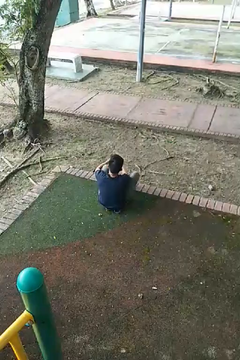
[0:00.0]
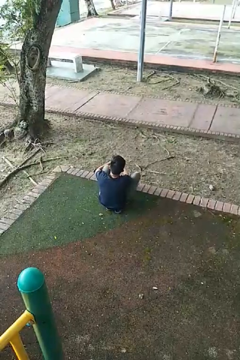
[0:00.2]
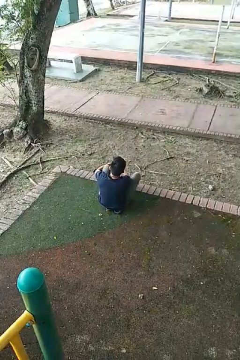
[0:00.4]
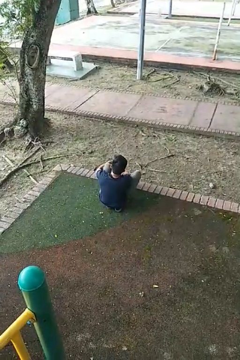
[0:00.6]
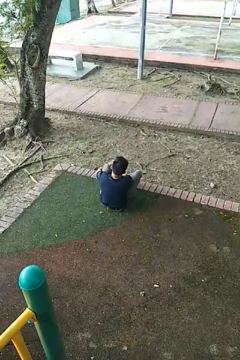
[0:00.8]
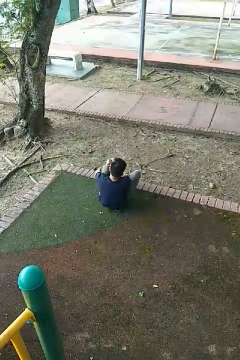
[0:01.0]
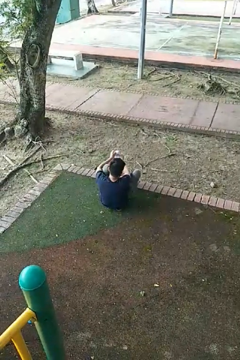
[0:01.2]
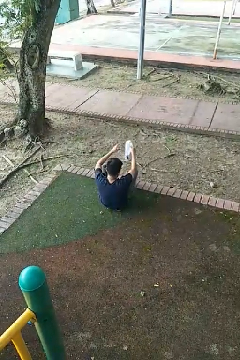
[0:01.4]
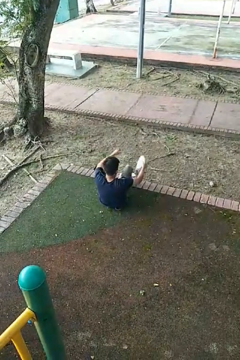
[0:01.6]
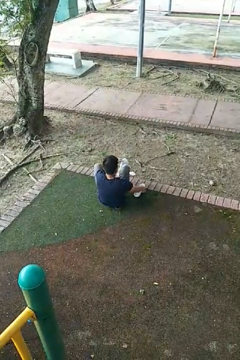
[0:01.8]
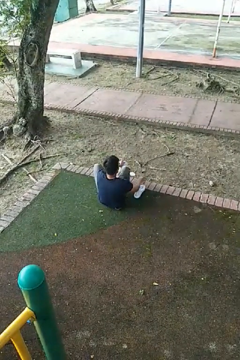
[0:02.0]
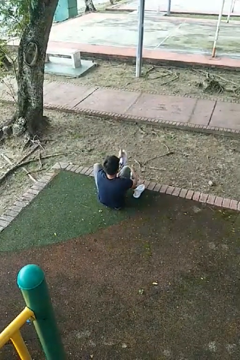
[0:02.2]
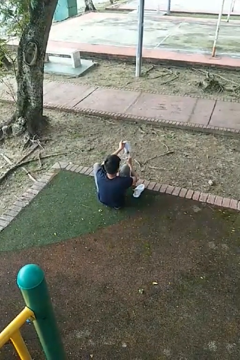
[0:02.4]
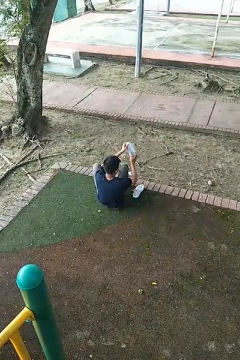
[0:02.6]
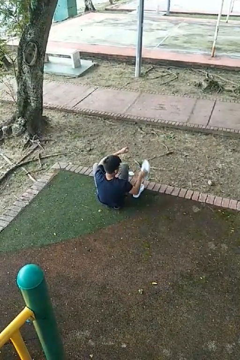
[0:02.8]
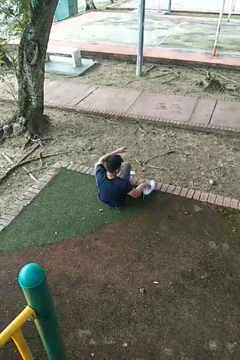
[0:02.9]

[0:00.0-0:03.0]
person takes off shoes

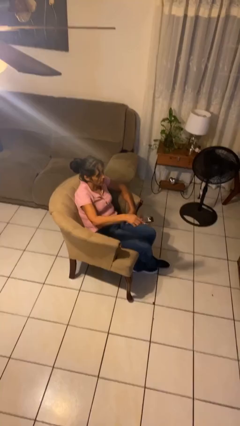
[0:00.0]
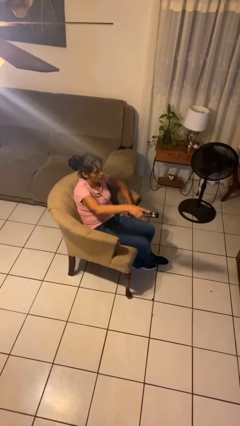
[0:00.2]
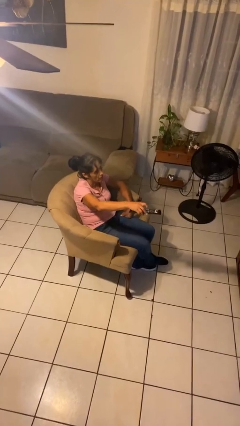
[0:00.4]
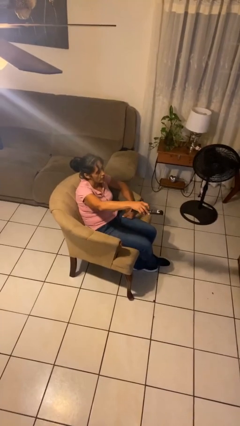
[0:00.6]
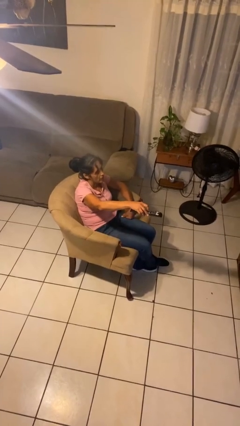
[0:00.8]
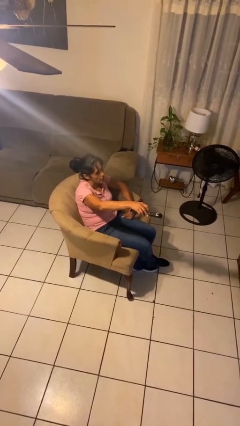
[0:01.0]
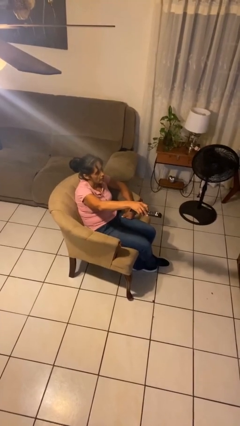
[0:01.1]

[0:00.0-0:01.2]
person uses television remote

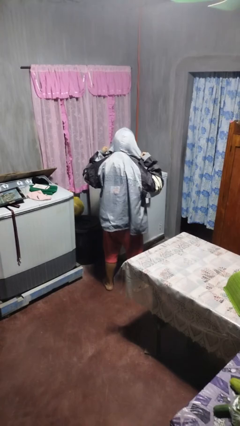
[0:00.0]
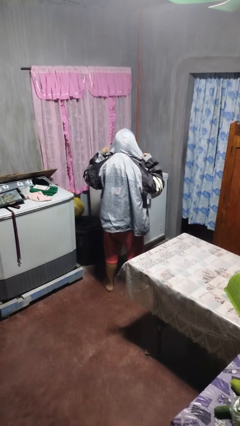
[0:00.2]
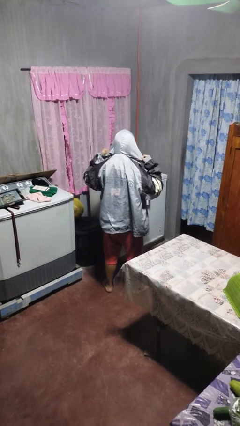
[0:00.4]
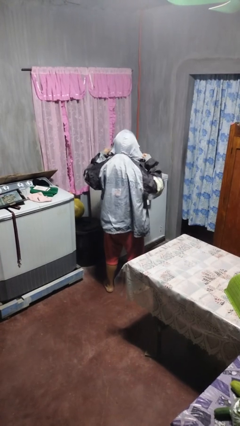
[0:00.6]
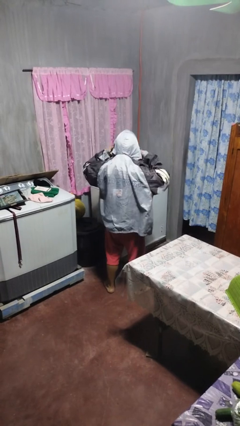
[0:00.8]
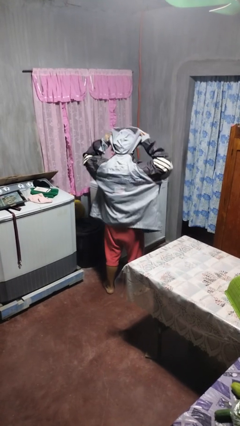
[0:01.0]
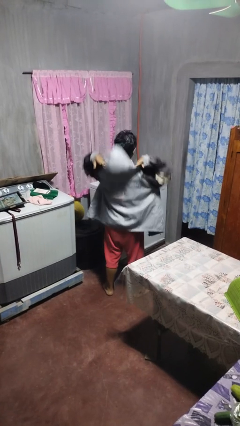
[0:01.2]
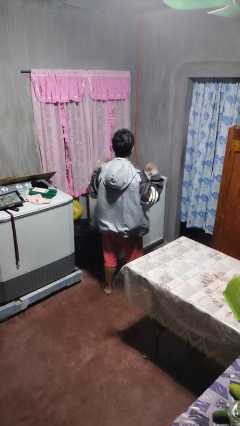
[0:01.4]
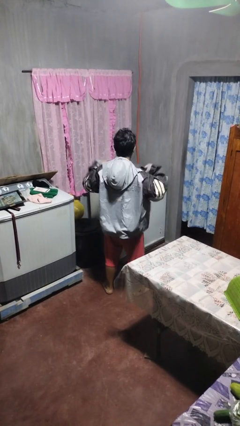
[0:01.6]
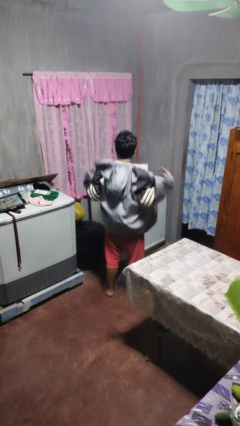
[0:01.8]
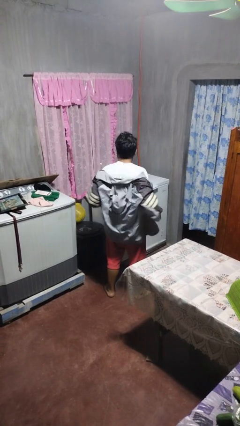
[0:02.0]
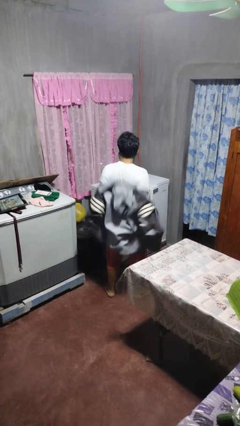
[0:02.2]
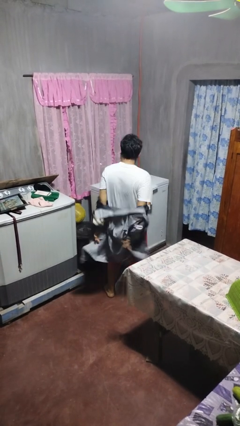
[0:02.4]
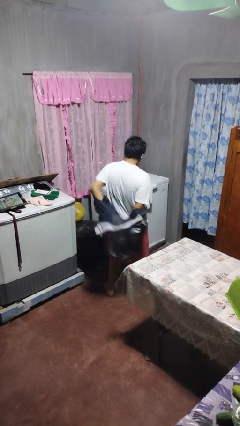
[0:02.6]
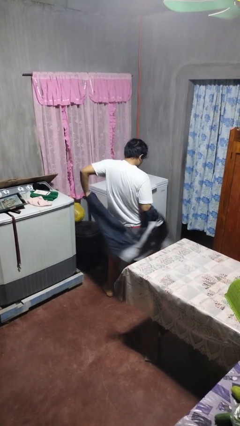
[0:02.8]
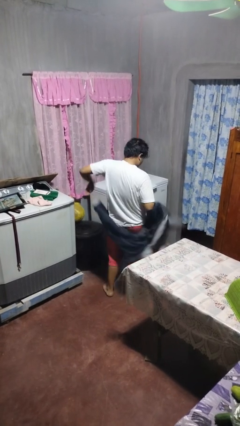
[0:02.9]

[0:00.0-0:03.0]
person takes off hoodie

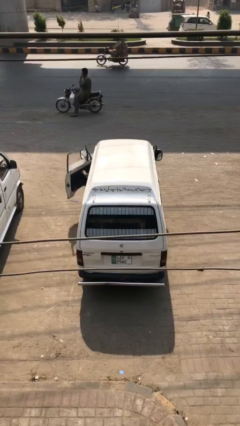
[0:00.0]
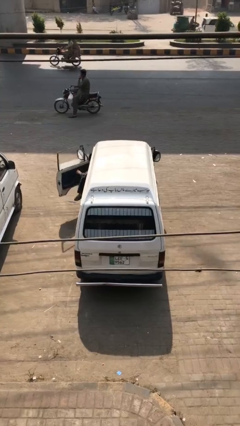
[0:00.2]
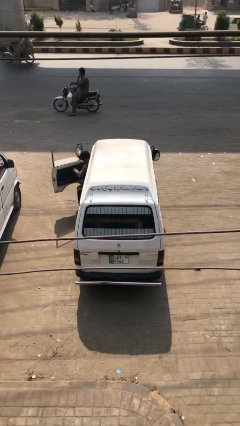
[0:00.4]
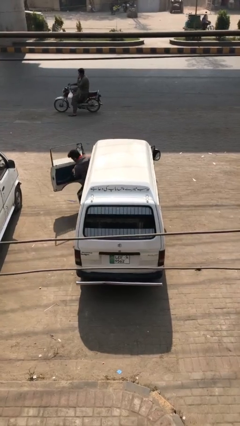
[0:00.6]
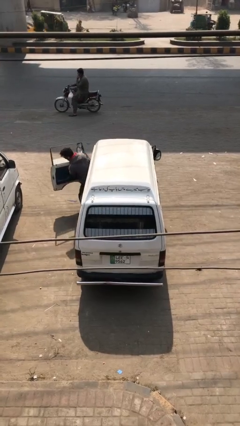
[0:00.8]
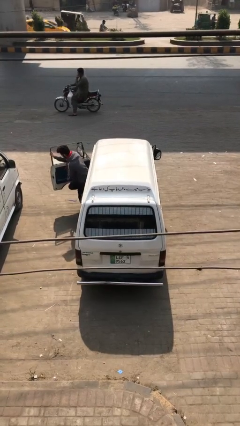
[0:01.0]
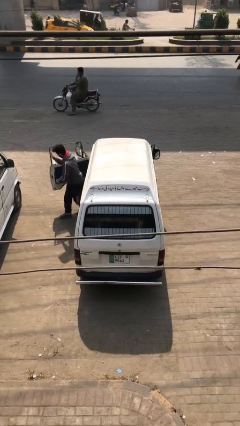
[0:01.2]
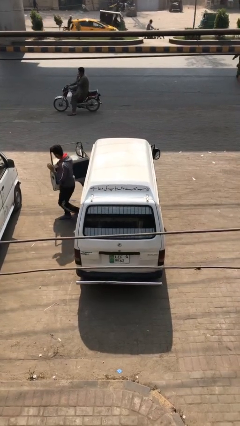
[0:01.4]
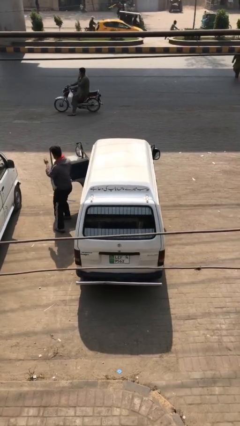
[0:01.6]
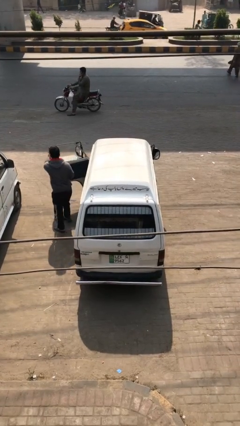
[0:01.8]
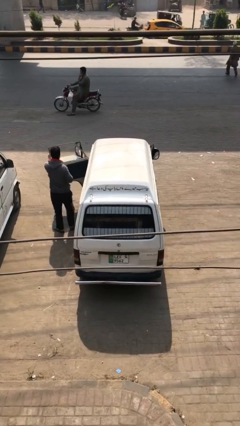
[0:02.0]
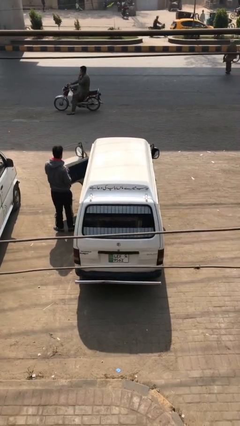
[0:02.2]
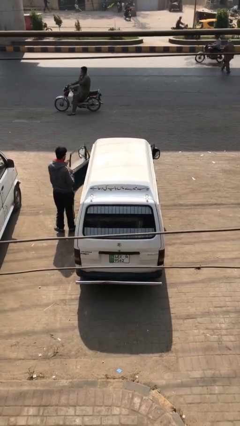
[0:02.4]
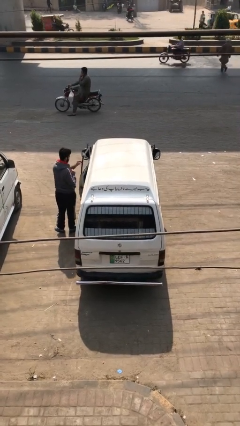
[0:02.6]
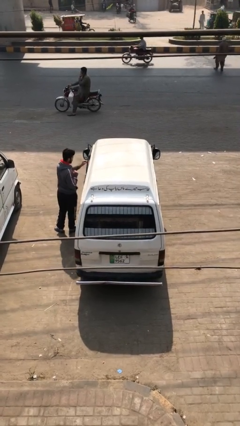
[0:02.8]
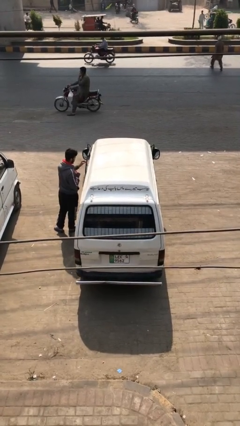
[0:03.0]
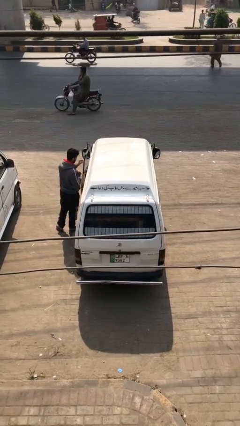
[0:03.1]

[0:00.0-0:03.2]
car drops off person

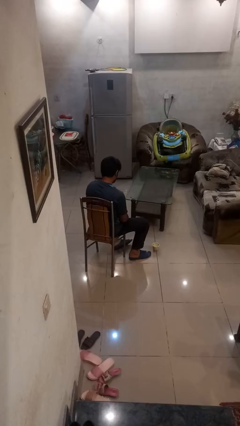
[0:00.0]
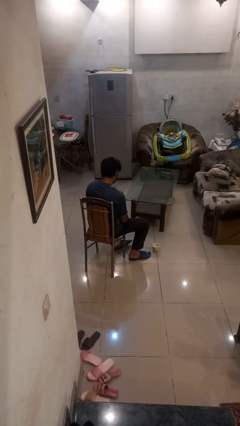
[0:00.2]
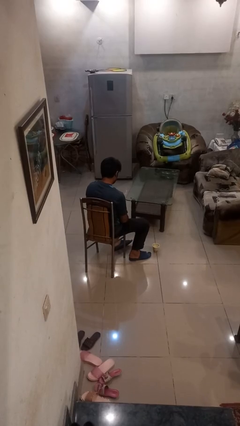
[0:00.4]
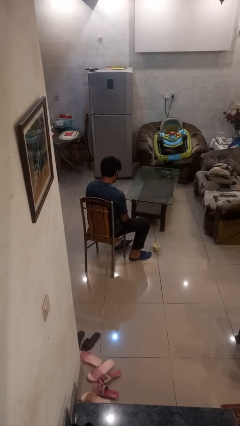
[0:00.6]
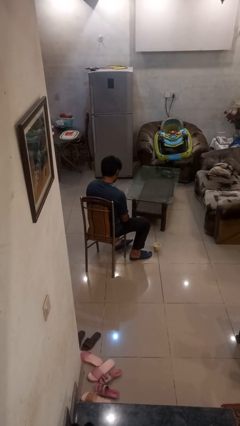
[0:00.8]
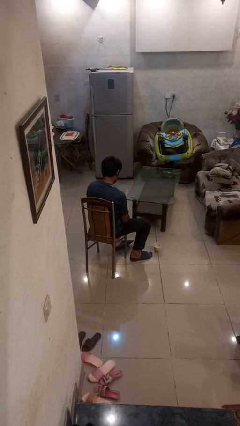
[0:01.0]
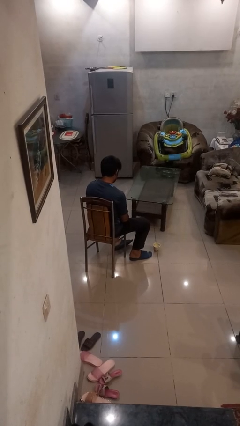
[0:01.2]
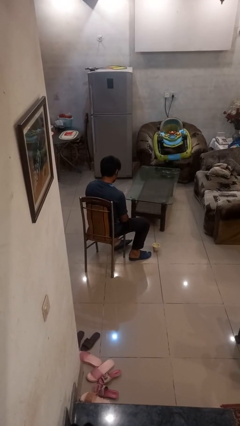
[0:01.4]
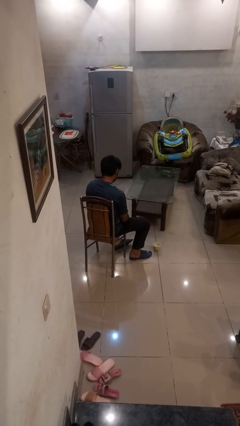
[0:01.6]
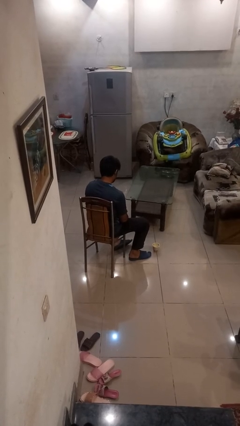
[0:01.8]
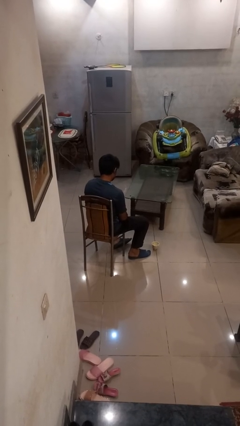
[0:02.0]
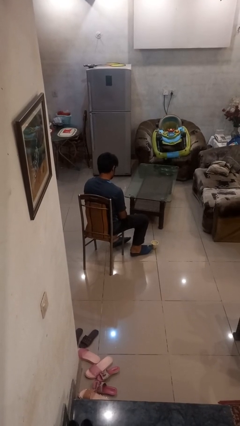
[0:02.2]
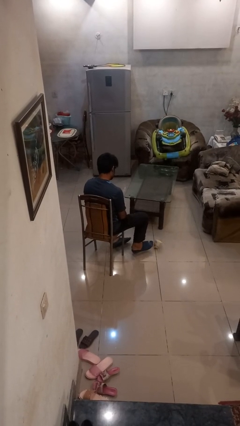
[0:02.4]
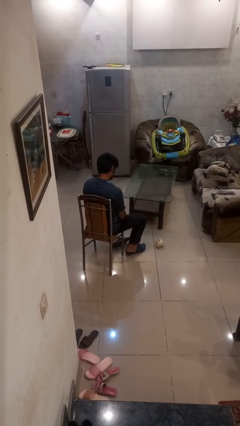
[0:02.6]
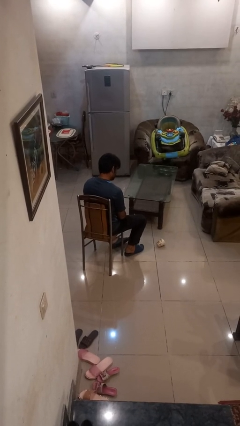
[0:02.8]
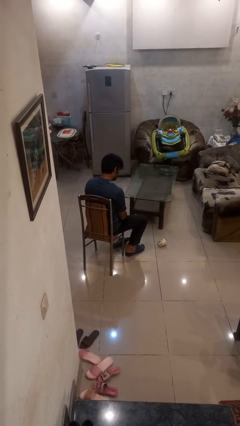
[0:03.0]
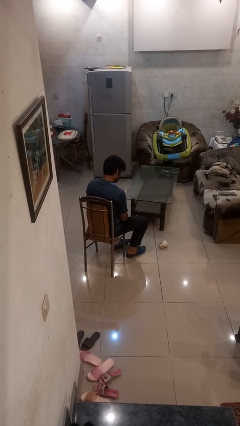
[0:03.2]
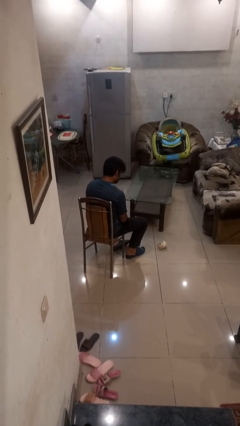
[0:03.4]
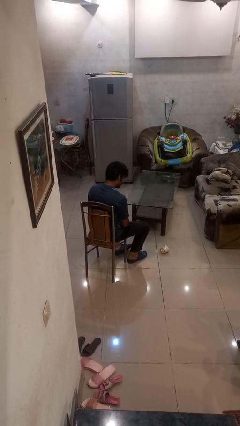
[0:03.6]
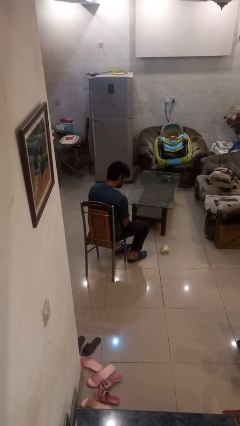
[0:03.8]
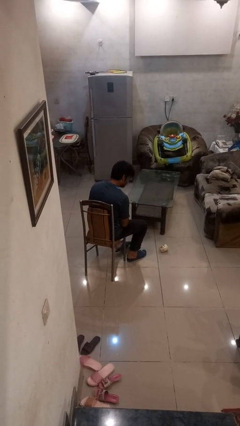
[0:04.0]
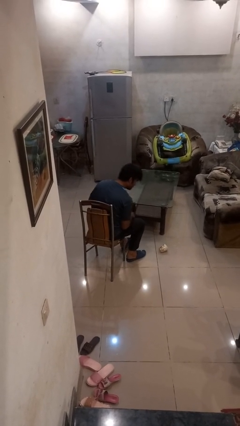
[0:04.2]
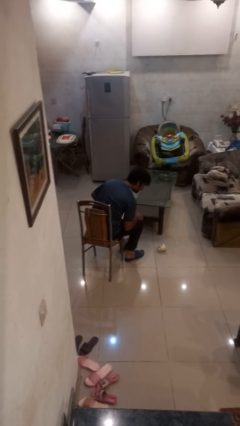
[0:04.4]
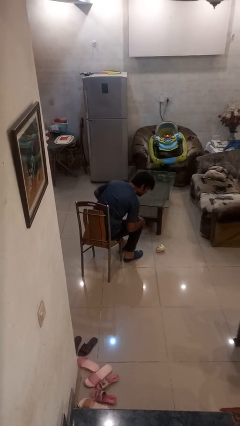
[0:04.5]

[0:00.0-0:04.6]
person spills on floor

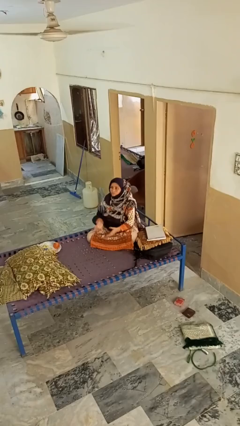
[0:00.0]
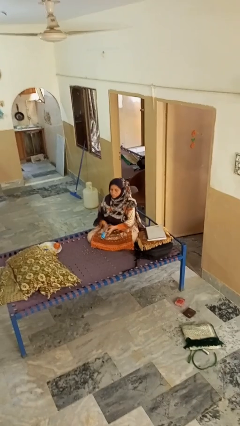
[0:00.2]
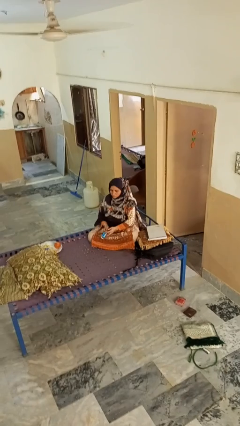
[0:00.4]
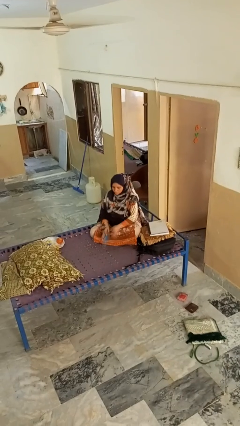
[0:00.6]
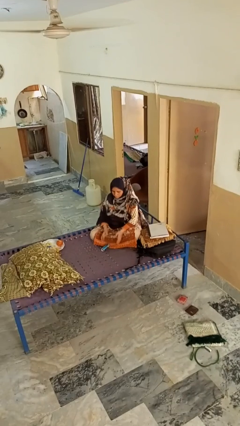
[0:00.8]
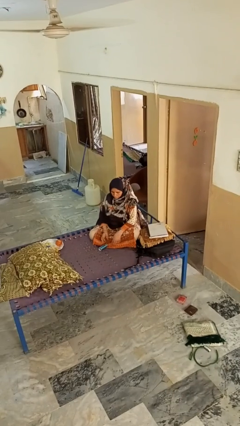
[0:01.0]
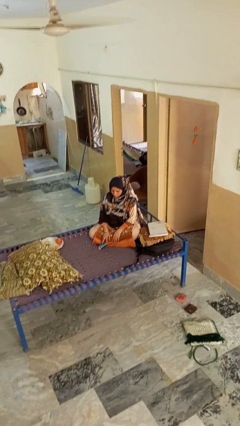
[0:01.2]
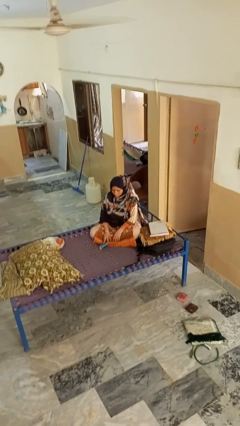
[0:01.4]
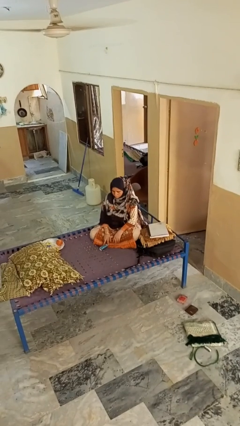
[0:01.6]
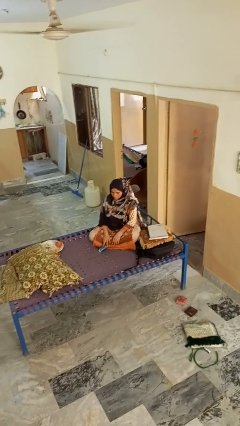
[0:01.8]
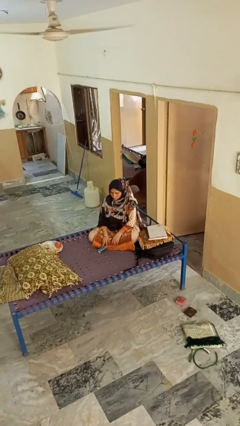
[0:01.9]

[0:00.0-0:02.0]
person catches dropped object

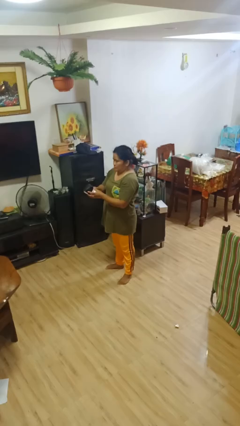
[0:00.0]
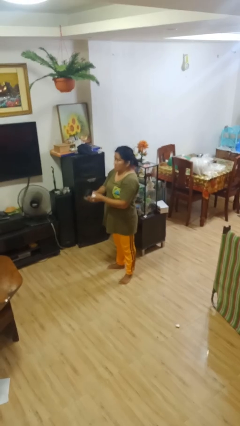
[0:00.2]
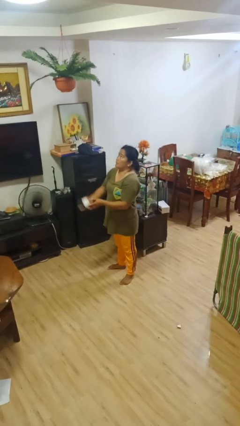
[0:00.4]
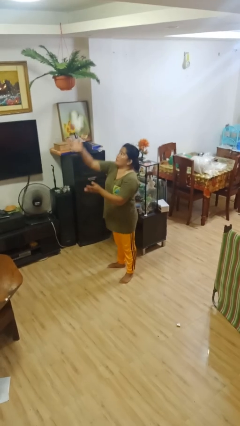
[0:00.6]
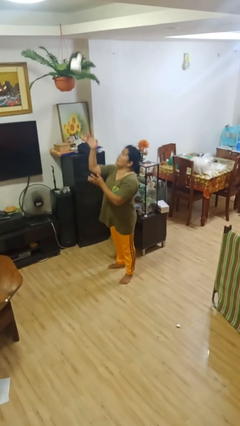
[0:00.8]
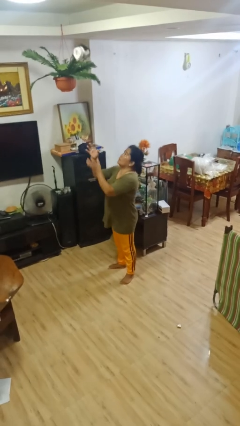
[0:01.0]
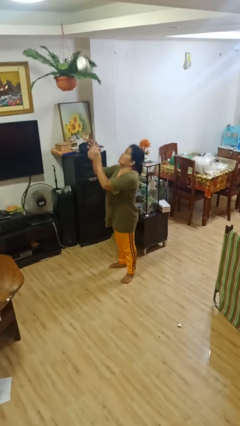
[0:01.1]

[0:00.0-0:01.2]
person drops object
